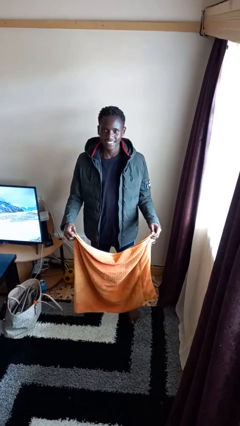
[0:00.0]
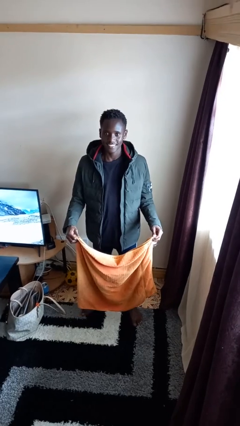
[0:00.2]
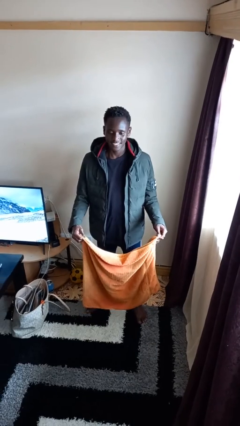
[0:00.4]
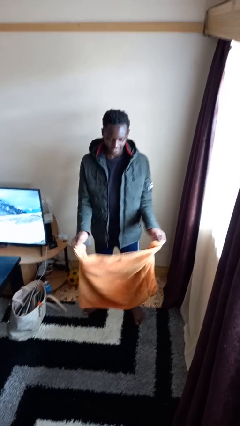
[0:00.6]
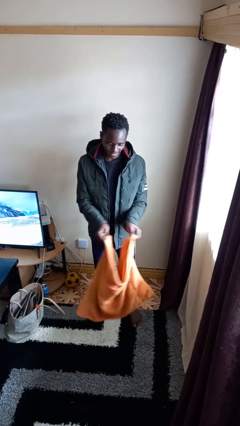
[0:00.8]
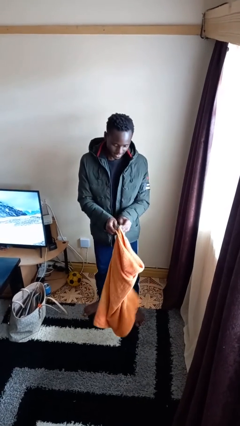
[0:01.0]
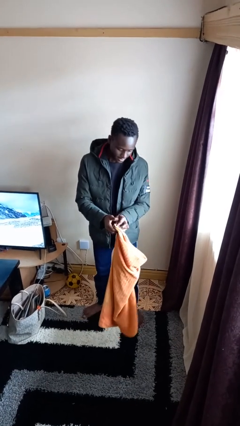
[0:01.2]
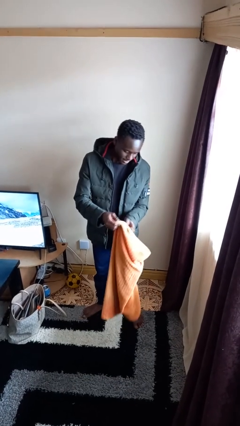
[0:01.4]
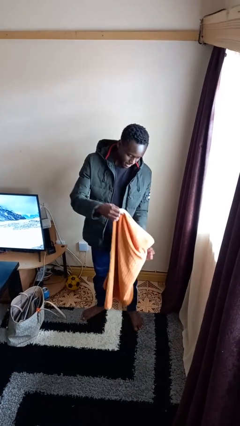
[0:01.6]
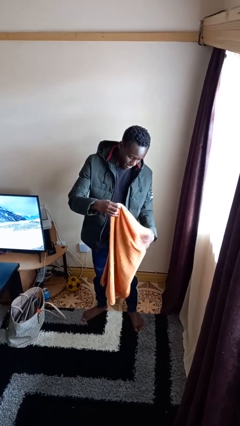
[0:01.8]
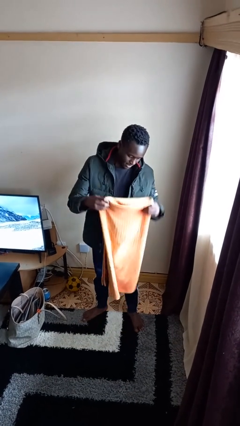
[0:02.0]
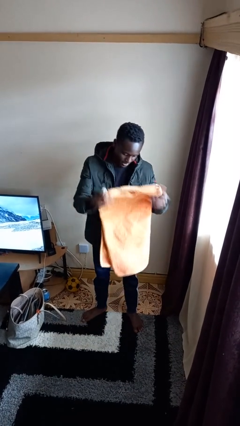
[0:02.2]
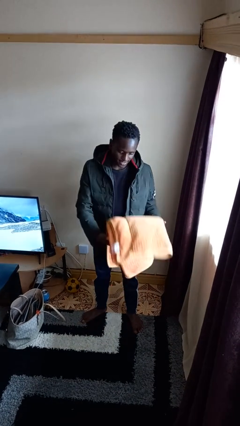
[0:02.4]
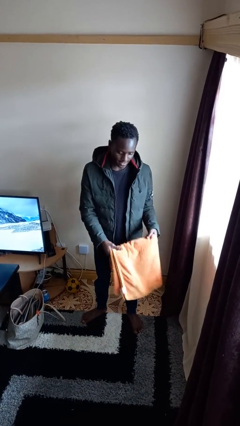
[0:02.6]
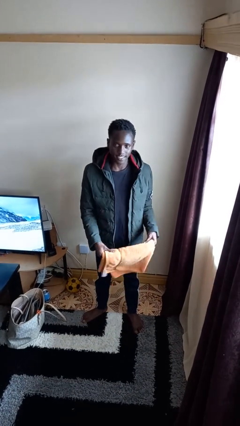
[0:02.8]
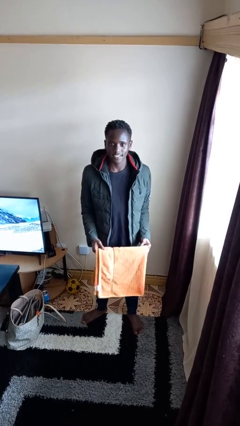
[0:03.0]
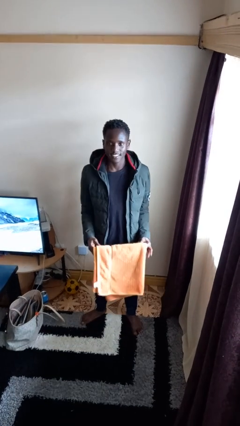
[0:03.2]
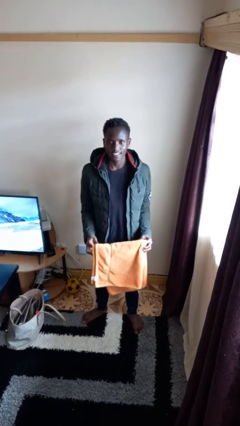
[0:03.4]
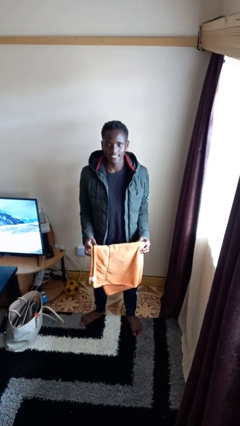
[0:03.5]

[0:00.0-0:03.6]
person folds towel

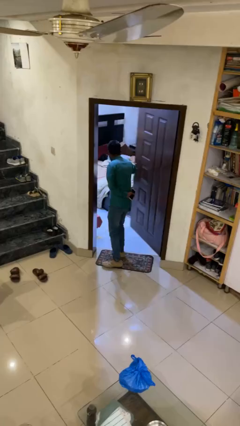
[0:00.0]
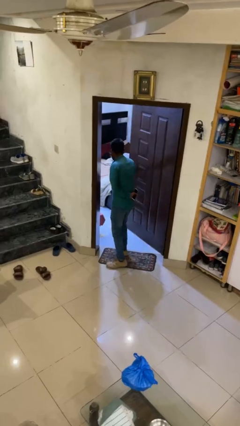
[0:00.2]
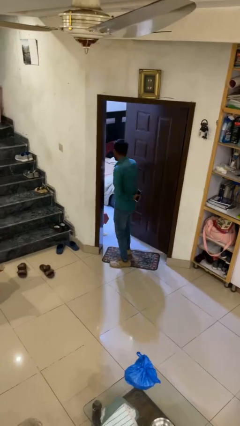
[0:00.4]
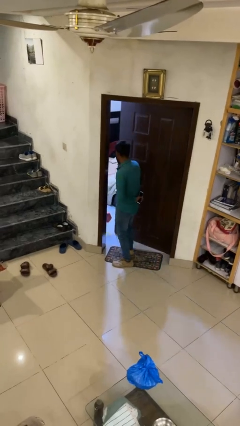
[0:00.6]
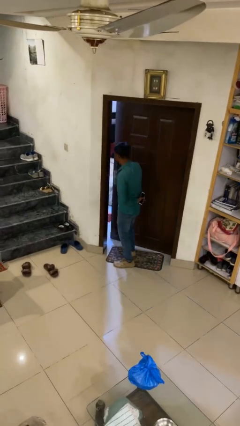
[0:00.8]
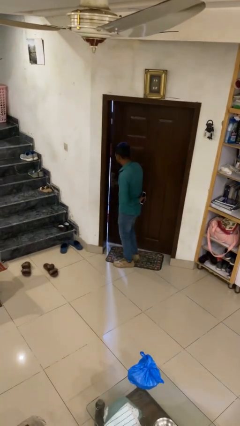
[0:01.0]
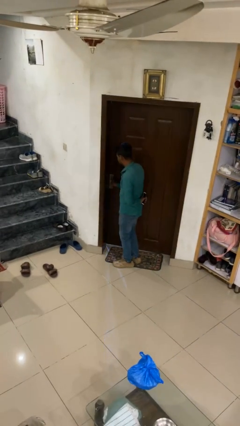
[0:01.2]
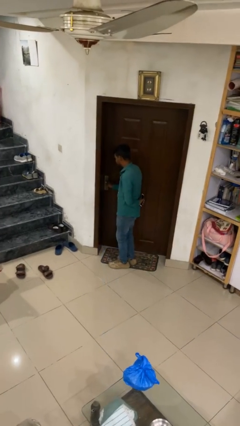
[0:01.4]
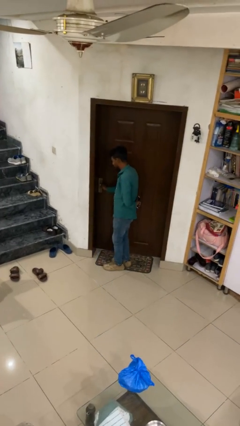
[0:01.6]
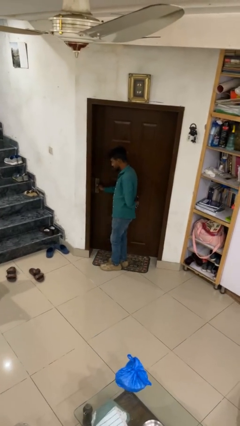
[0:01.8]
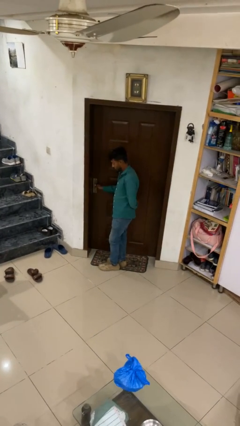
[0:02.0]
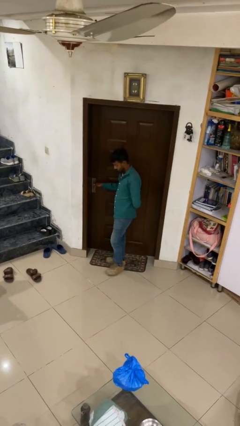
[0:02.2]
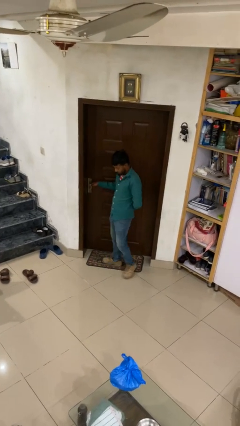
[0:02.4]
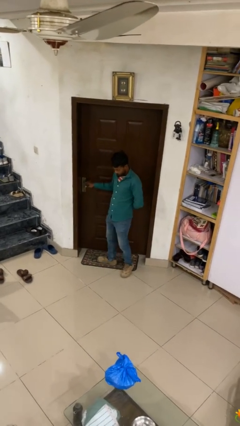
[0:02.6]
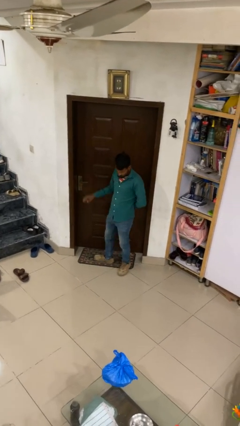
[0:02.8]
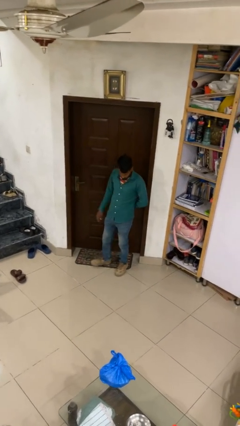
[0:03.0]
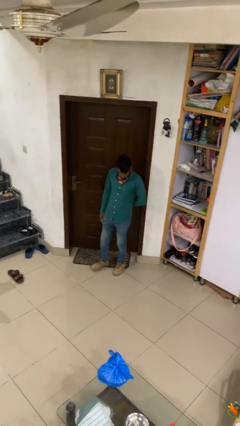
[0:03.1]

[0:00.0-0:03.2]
person closes facility door

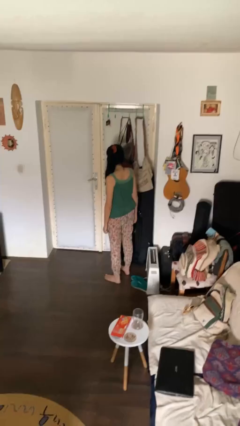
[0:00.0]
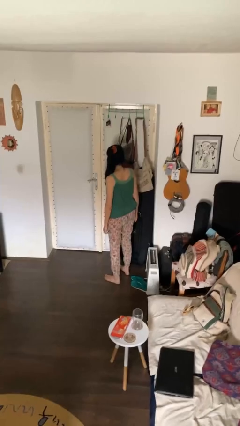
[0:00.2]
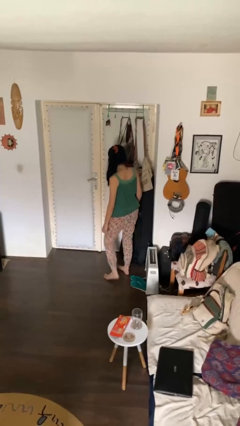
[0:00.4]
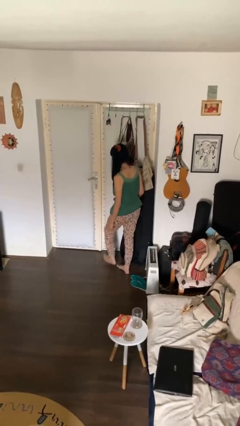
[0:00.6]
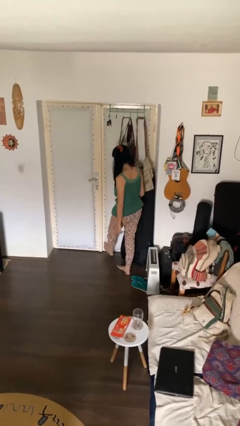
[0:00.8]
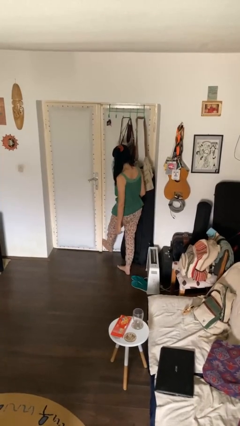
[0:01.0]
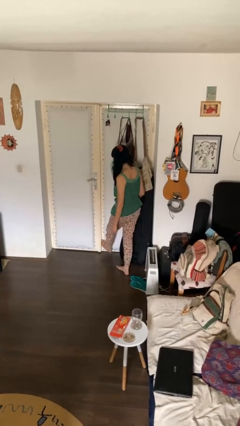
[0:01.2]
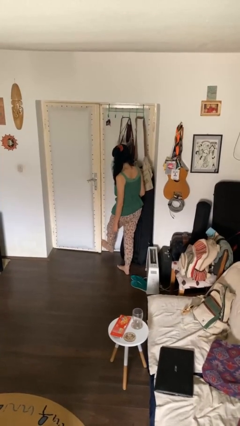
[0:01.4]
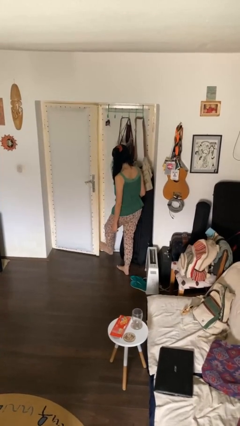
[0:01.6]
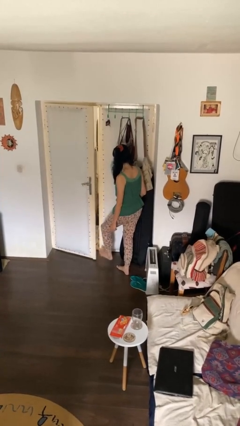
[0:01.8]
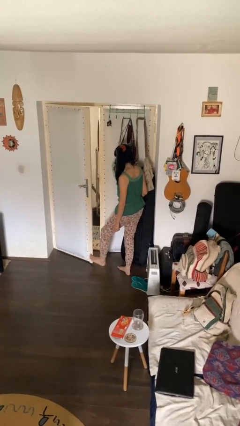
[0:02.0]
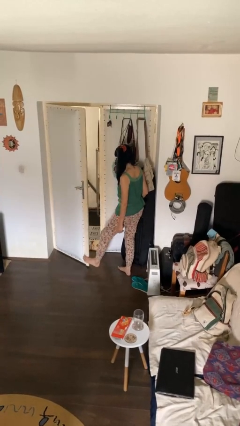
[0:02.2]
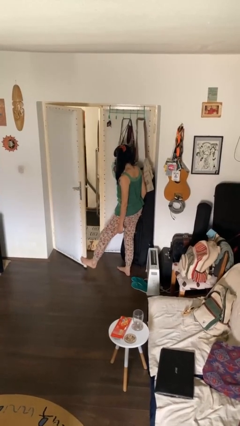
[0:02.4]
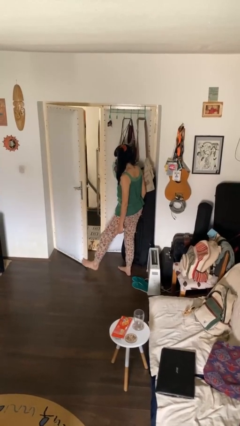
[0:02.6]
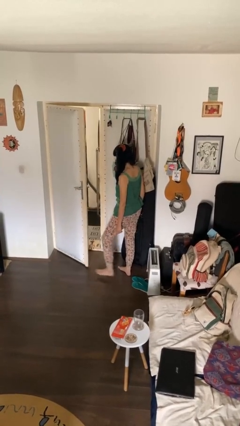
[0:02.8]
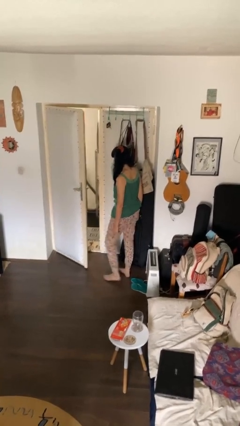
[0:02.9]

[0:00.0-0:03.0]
person opens facility door

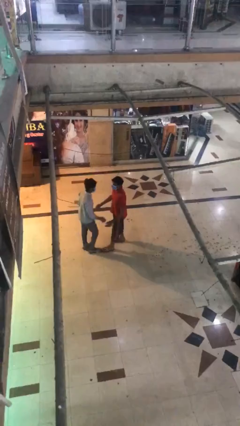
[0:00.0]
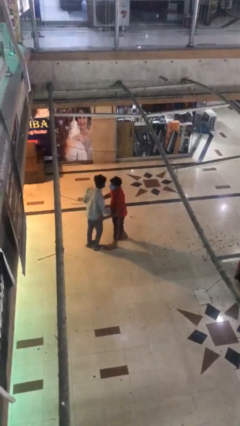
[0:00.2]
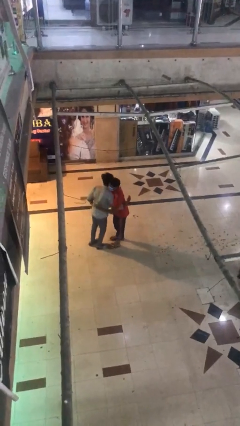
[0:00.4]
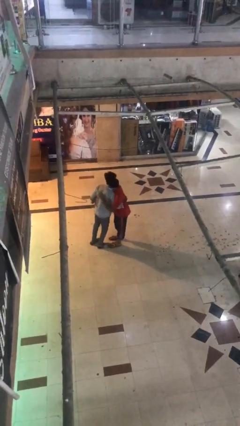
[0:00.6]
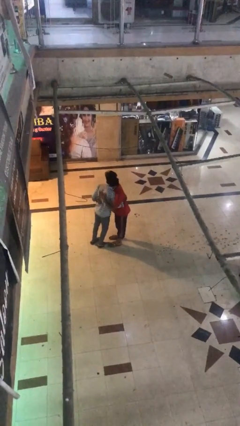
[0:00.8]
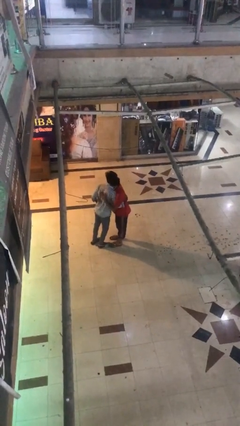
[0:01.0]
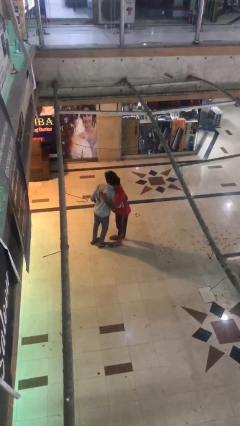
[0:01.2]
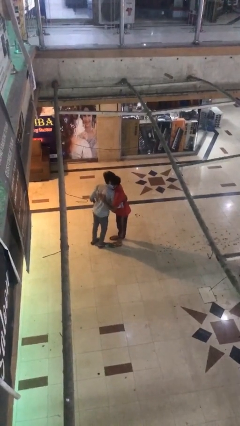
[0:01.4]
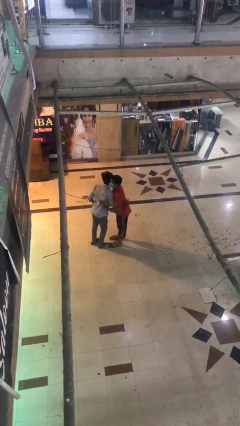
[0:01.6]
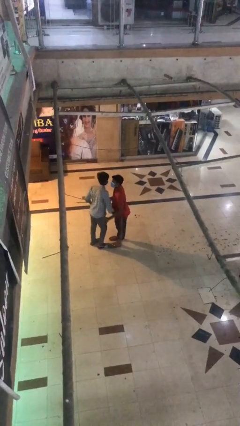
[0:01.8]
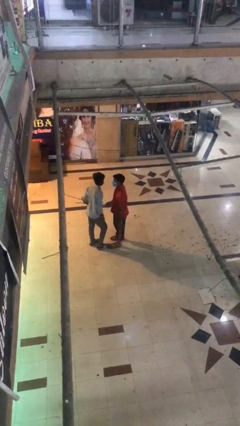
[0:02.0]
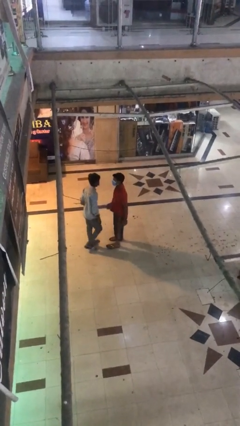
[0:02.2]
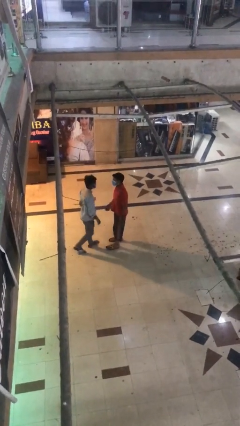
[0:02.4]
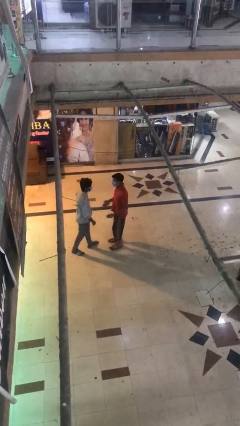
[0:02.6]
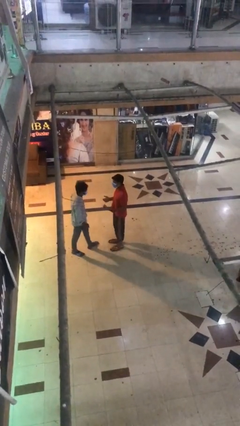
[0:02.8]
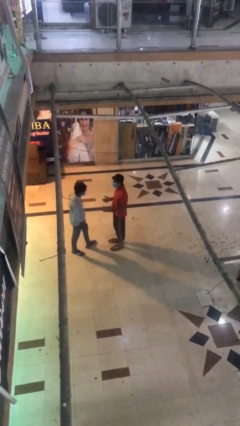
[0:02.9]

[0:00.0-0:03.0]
person embraces person

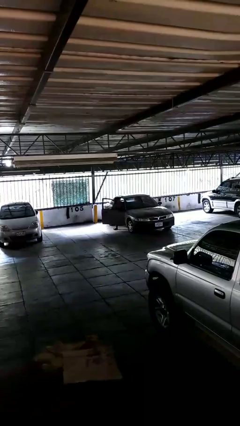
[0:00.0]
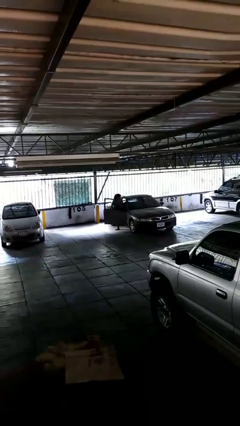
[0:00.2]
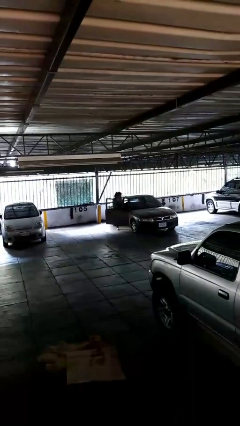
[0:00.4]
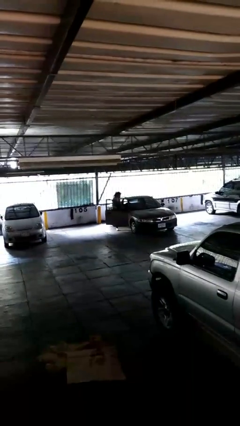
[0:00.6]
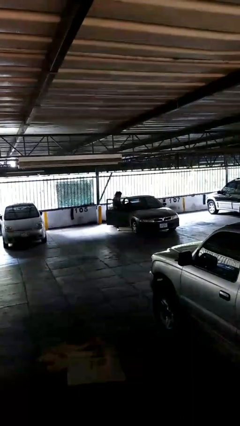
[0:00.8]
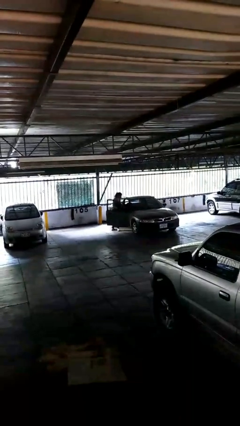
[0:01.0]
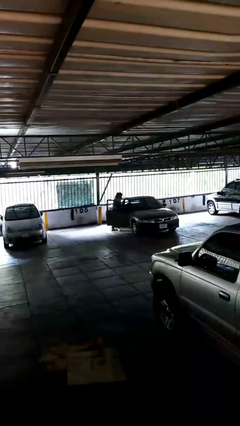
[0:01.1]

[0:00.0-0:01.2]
person exits car

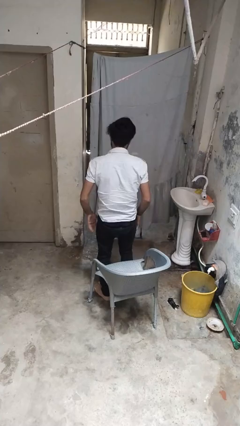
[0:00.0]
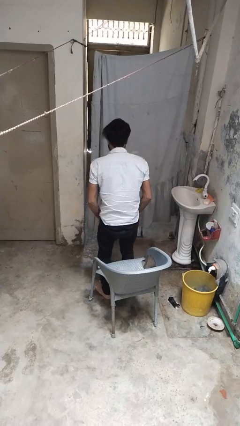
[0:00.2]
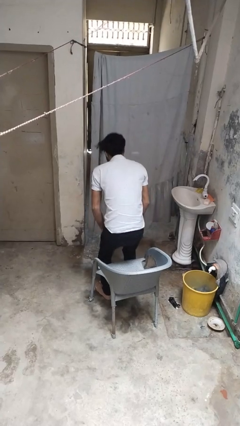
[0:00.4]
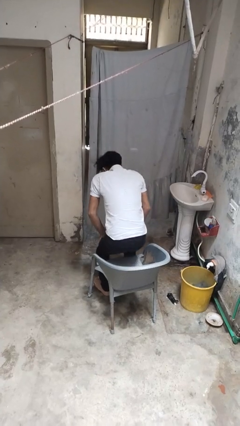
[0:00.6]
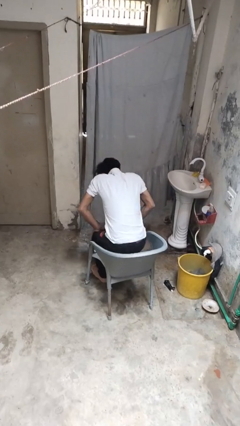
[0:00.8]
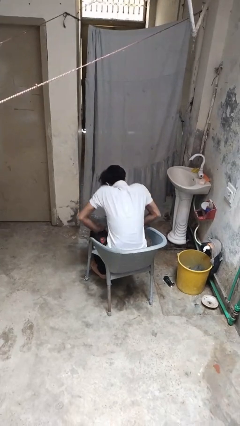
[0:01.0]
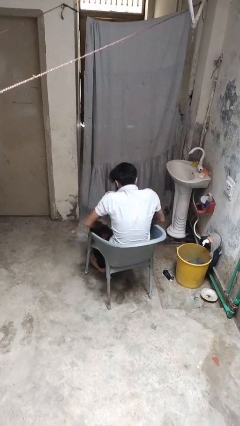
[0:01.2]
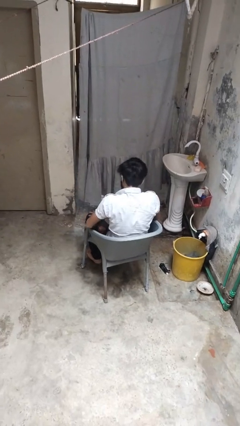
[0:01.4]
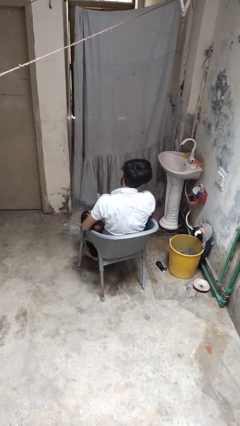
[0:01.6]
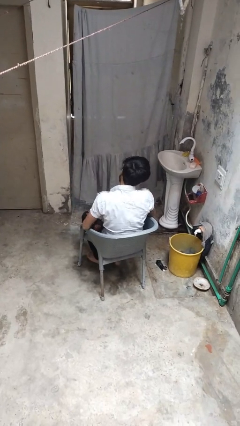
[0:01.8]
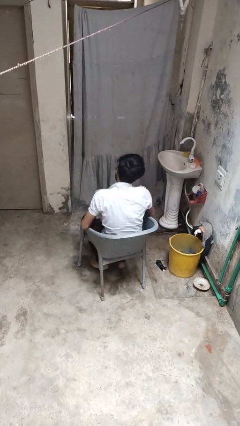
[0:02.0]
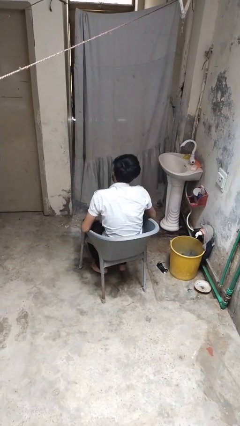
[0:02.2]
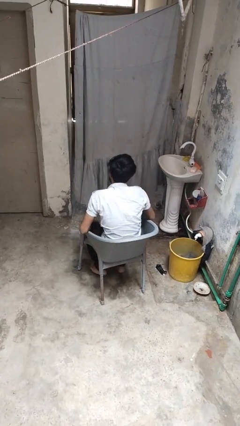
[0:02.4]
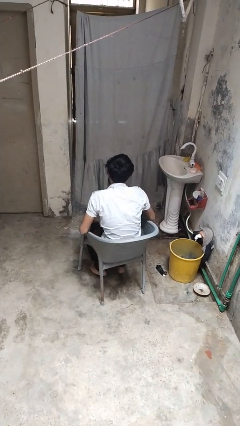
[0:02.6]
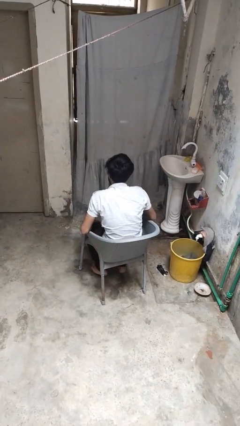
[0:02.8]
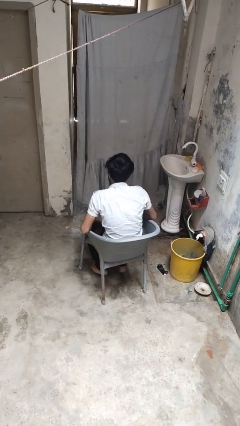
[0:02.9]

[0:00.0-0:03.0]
person sits down

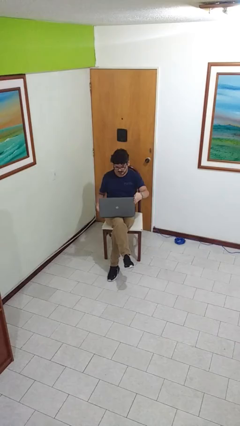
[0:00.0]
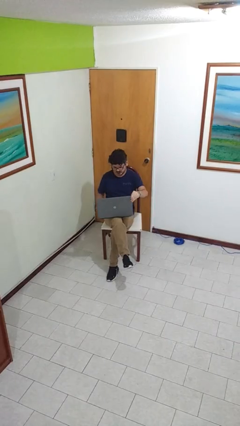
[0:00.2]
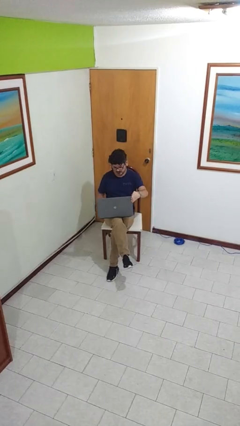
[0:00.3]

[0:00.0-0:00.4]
person opens laptop
